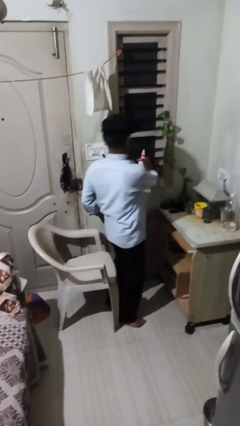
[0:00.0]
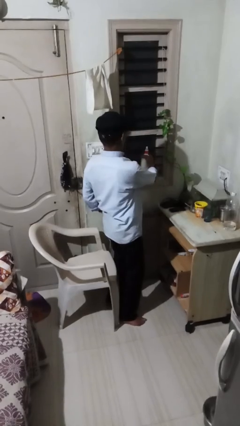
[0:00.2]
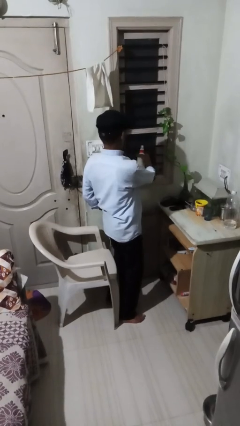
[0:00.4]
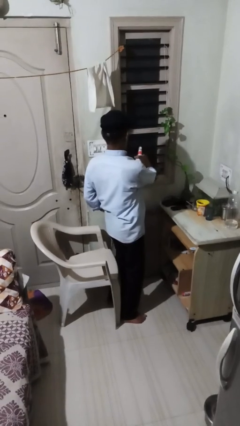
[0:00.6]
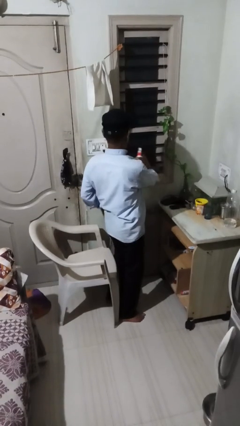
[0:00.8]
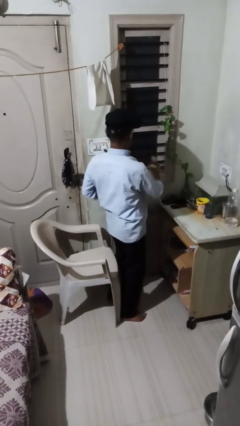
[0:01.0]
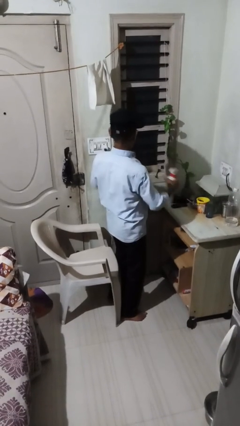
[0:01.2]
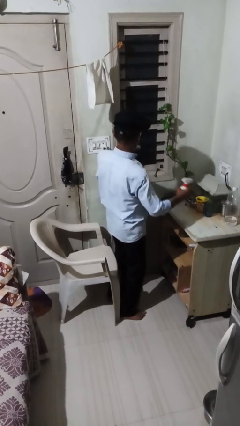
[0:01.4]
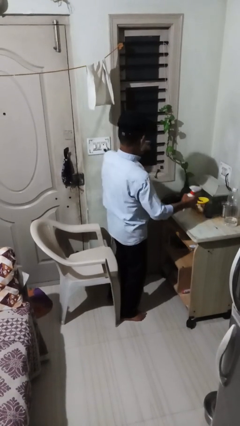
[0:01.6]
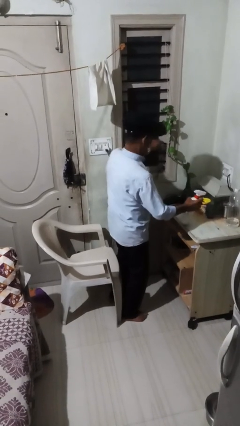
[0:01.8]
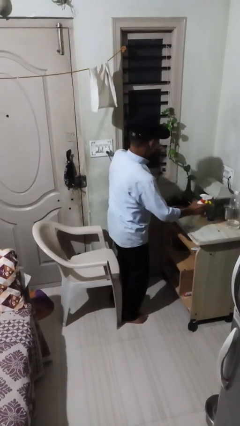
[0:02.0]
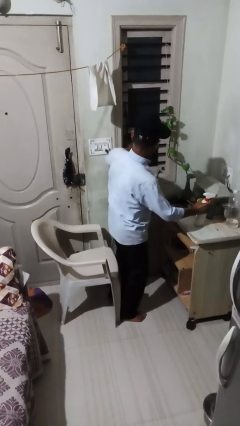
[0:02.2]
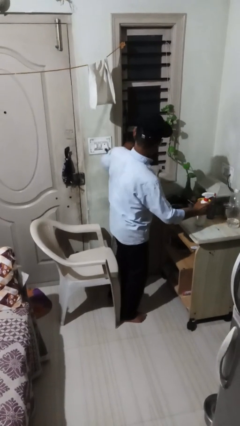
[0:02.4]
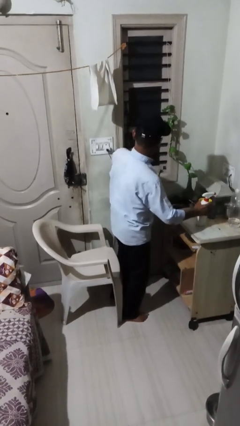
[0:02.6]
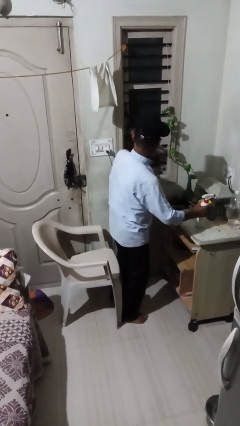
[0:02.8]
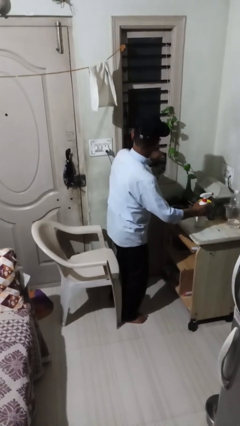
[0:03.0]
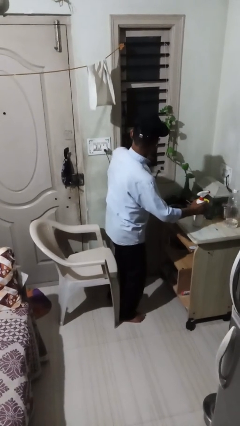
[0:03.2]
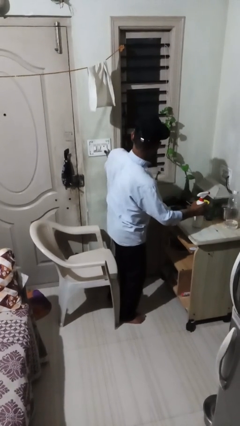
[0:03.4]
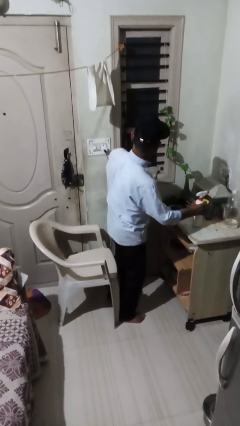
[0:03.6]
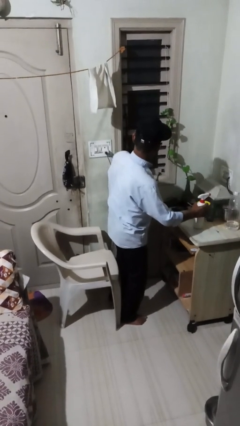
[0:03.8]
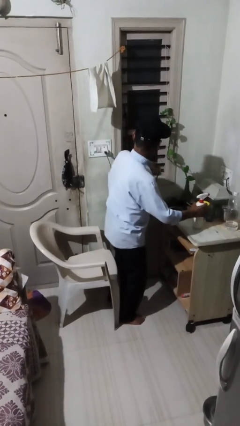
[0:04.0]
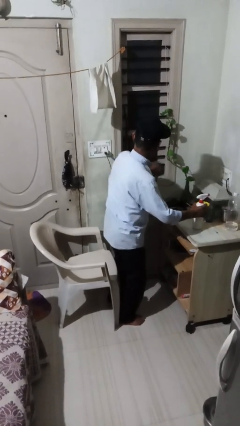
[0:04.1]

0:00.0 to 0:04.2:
person washes window

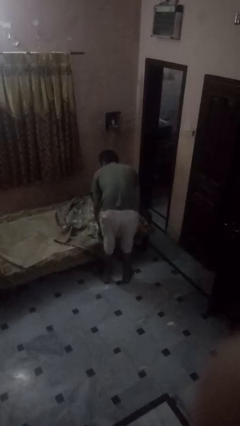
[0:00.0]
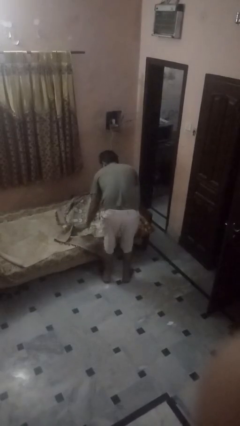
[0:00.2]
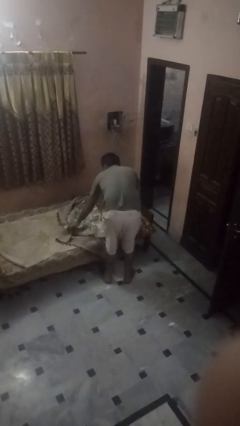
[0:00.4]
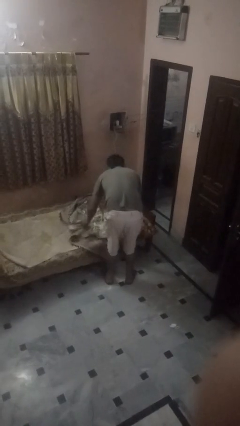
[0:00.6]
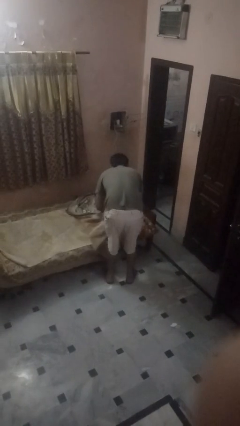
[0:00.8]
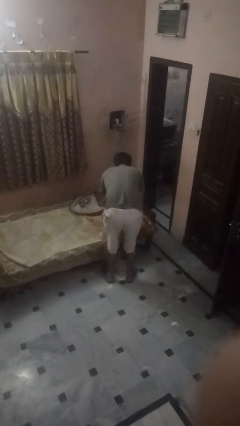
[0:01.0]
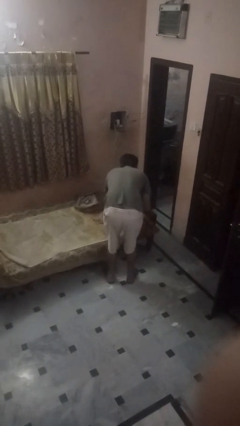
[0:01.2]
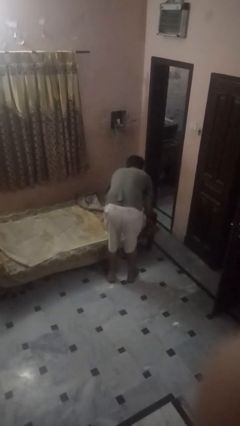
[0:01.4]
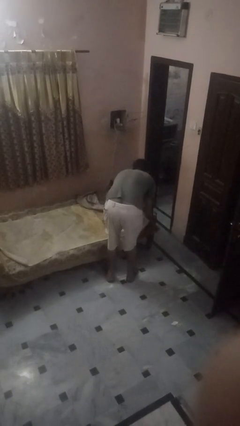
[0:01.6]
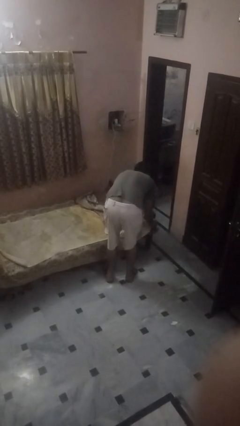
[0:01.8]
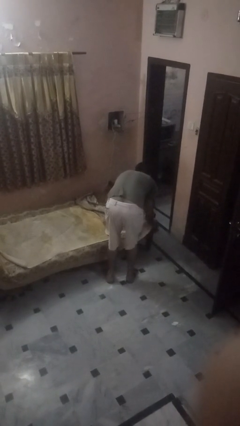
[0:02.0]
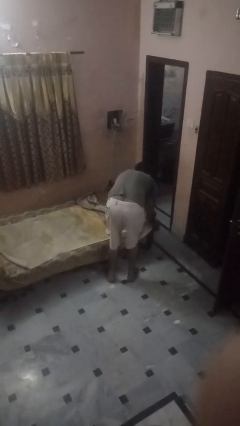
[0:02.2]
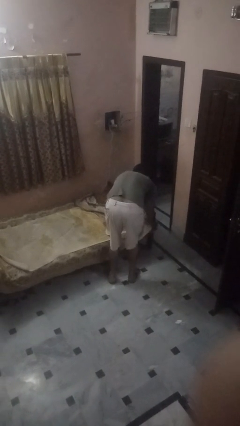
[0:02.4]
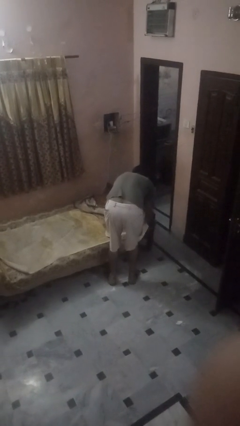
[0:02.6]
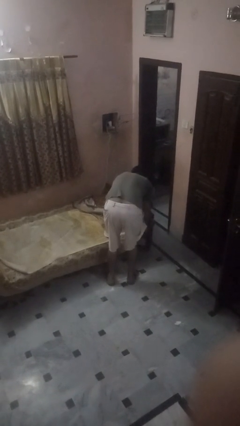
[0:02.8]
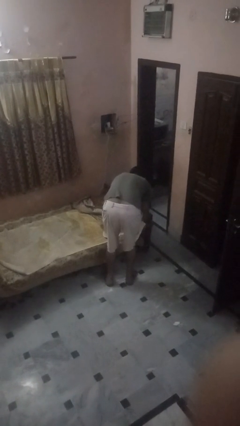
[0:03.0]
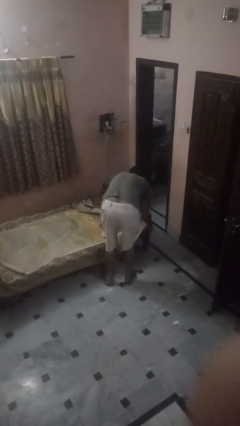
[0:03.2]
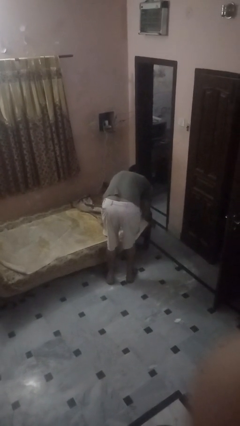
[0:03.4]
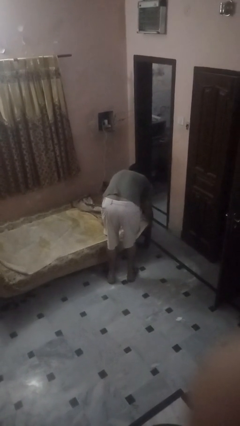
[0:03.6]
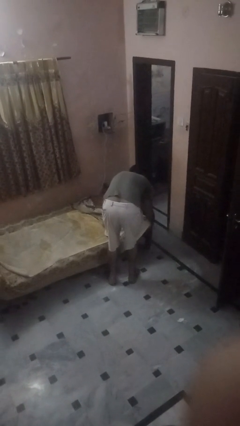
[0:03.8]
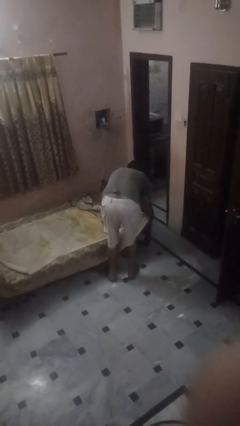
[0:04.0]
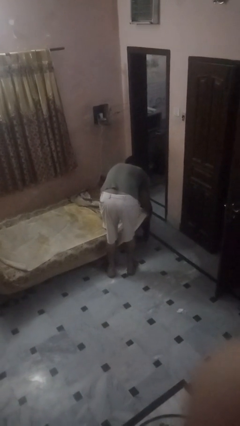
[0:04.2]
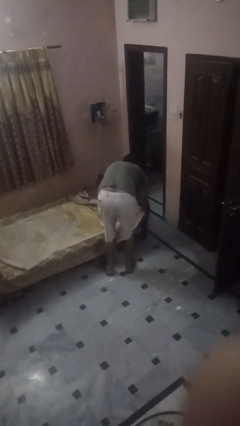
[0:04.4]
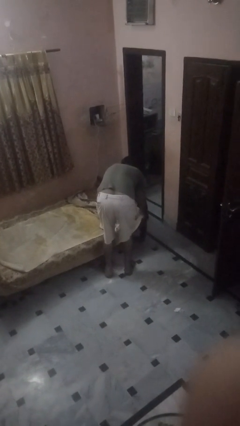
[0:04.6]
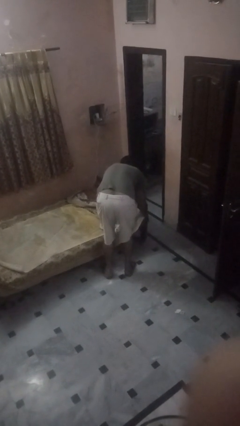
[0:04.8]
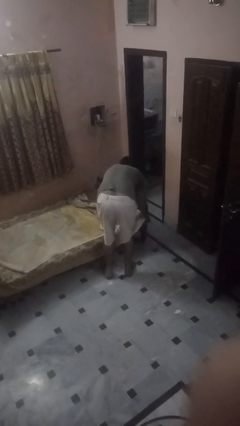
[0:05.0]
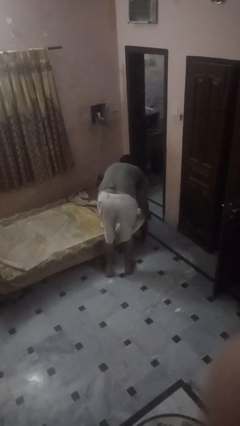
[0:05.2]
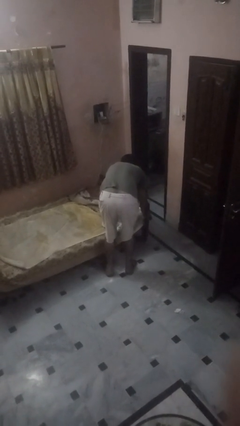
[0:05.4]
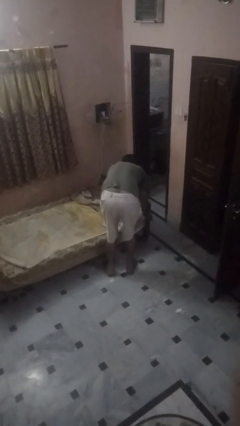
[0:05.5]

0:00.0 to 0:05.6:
person makes bed

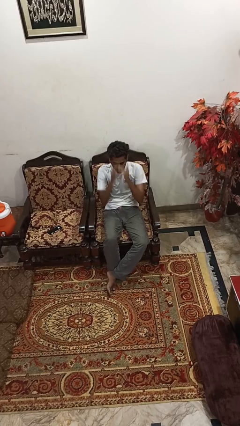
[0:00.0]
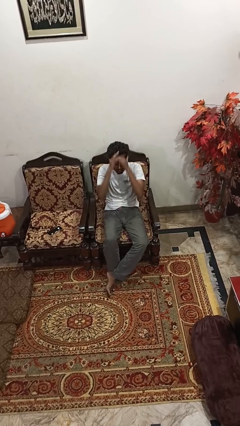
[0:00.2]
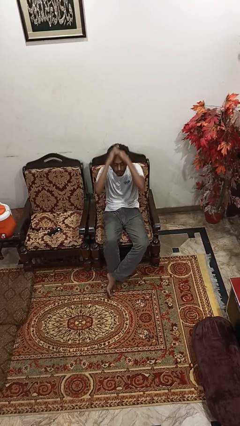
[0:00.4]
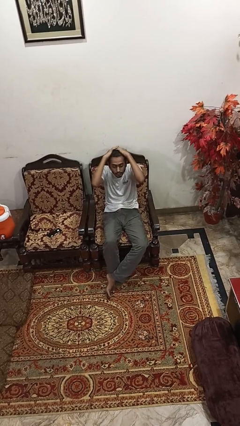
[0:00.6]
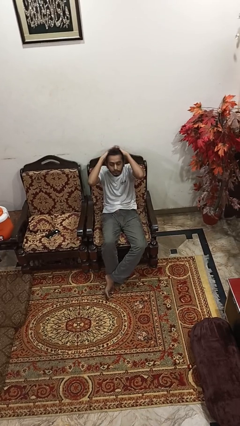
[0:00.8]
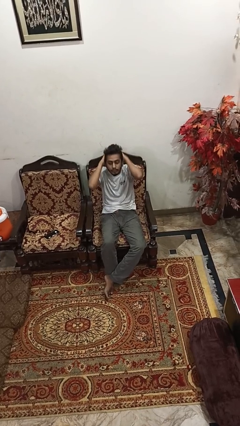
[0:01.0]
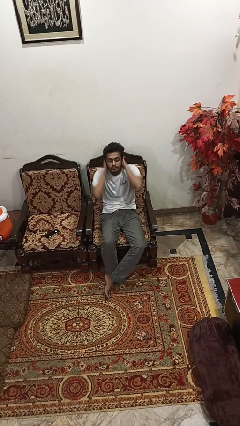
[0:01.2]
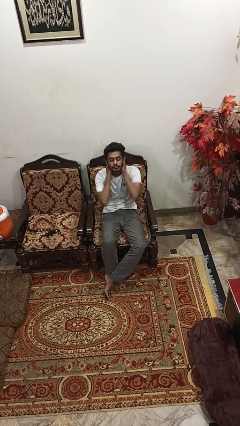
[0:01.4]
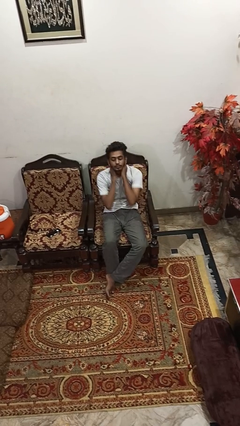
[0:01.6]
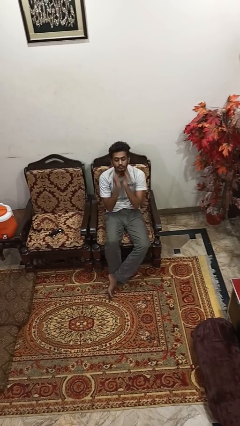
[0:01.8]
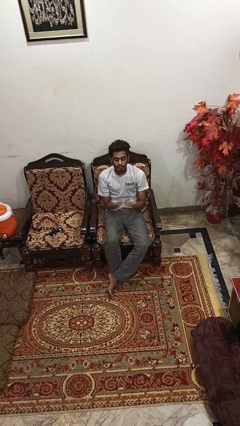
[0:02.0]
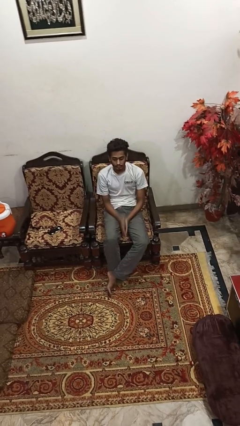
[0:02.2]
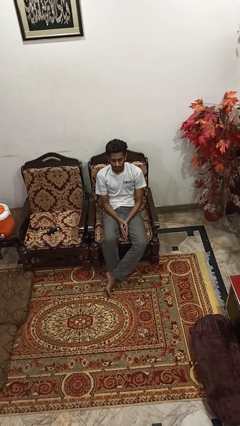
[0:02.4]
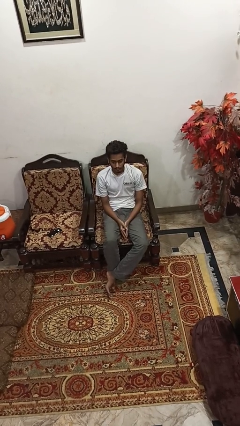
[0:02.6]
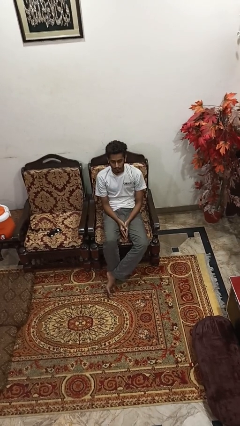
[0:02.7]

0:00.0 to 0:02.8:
person strokes hair

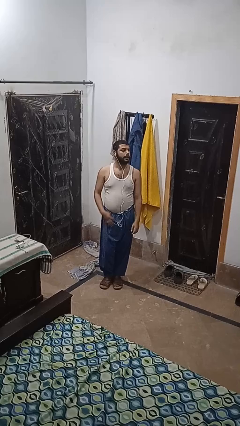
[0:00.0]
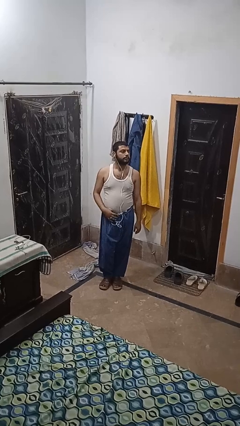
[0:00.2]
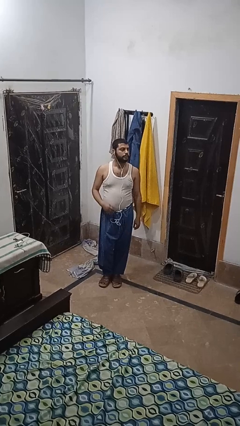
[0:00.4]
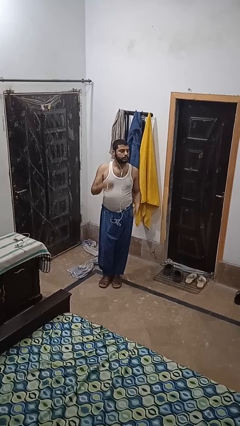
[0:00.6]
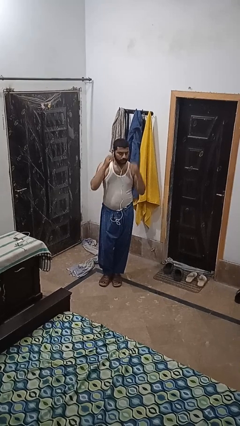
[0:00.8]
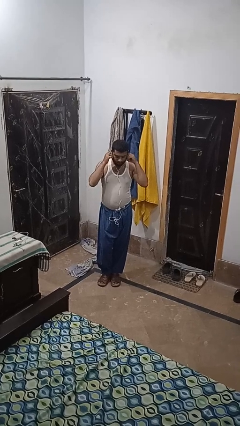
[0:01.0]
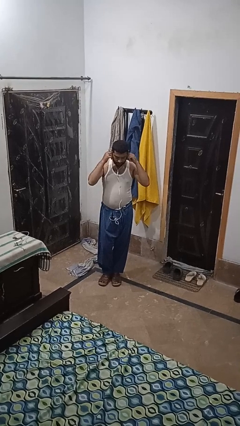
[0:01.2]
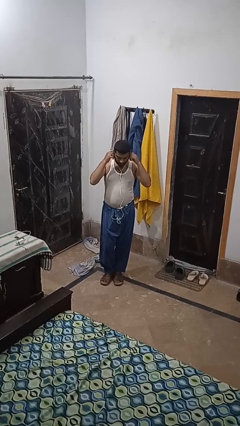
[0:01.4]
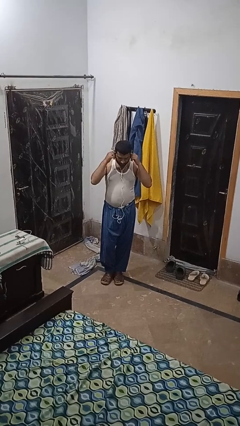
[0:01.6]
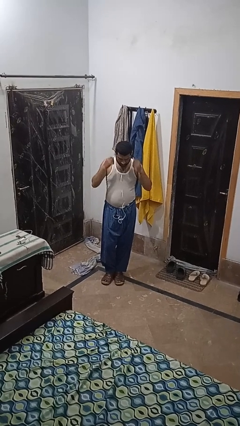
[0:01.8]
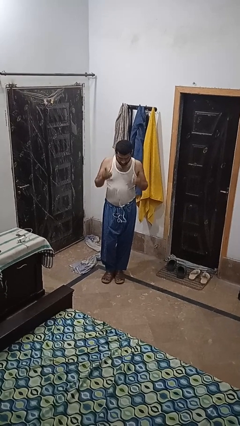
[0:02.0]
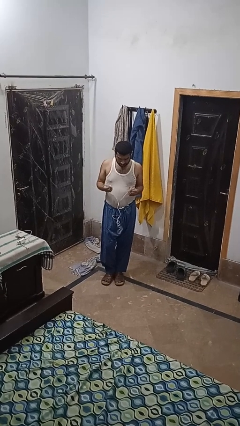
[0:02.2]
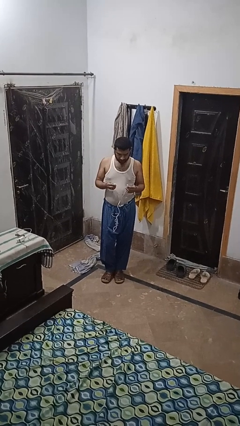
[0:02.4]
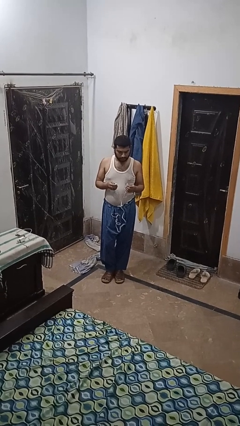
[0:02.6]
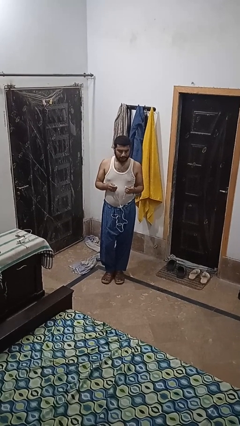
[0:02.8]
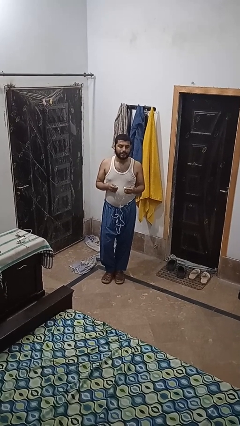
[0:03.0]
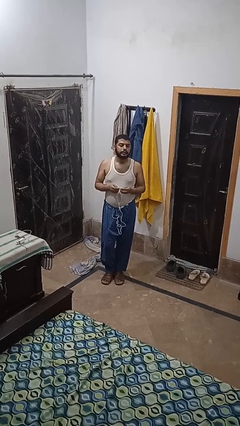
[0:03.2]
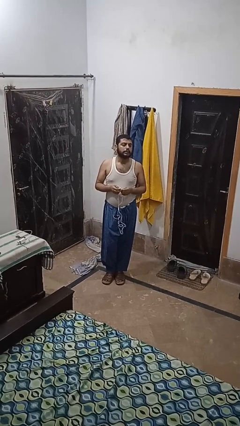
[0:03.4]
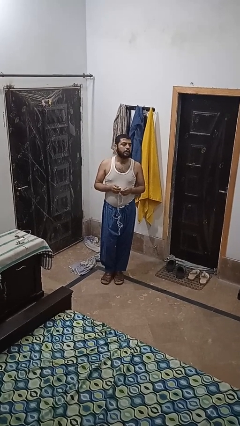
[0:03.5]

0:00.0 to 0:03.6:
person takes off headphones

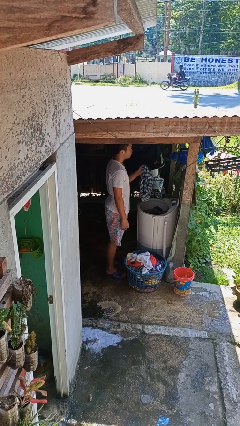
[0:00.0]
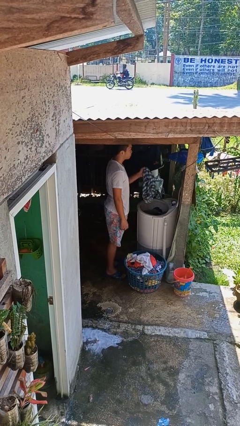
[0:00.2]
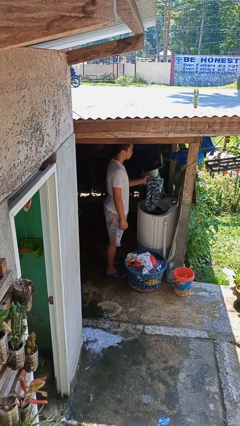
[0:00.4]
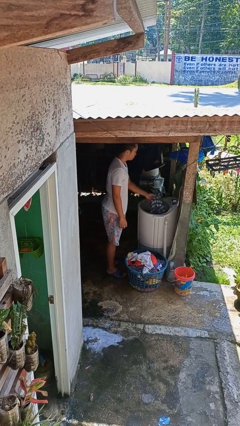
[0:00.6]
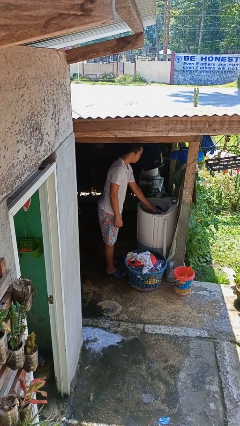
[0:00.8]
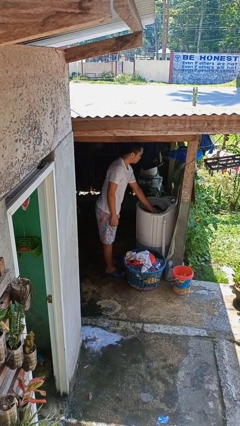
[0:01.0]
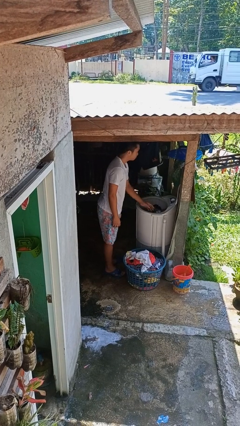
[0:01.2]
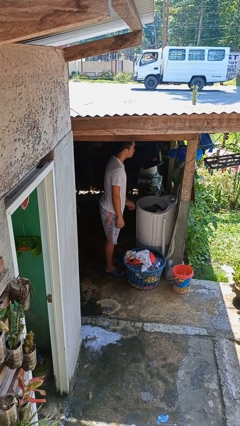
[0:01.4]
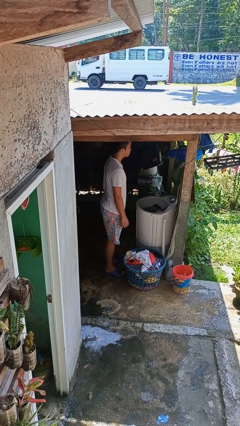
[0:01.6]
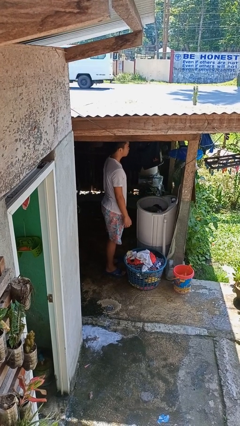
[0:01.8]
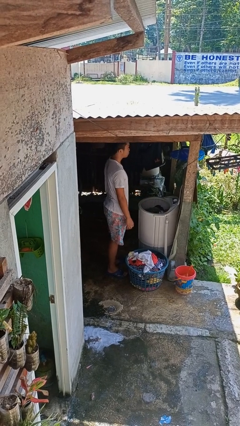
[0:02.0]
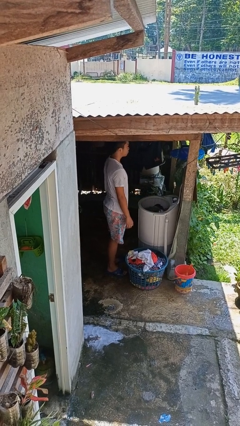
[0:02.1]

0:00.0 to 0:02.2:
person loads clotheswasher
